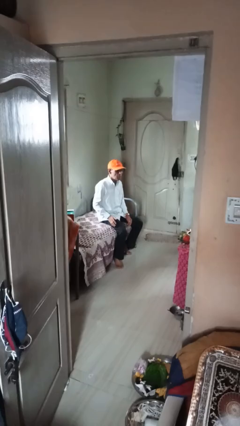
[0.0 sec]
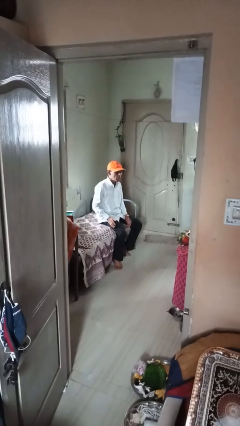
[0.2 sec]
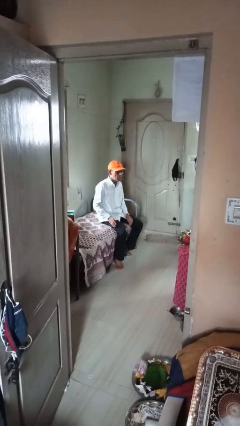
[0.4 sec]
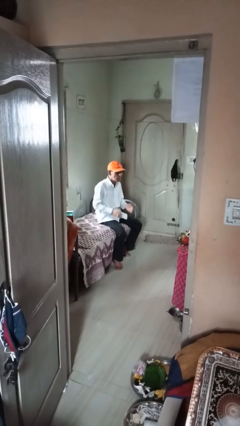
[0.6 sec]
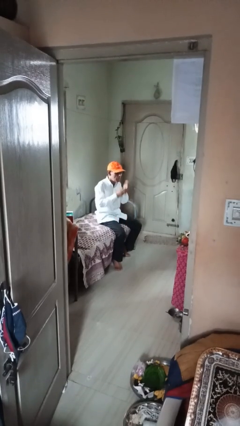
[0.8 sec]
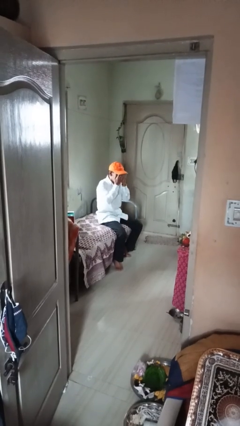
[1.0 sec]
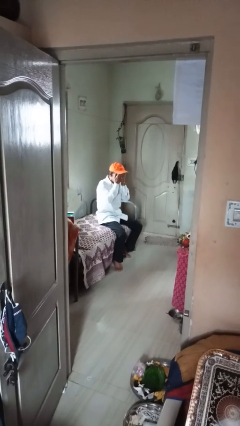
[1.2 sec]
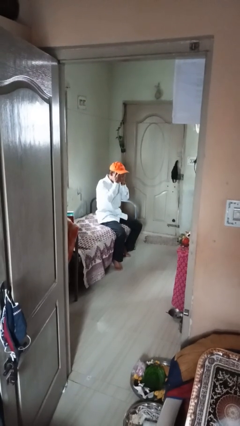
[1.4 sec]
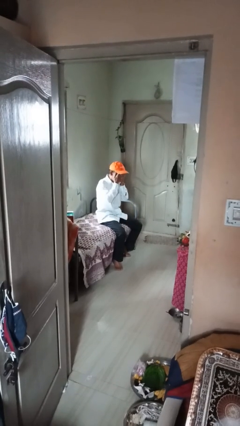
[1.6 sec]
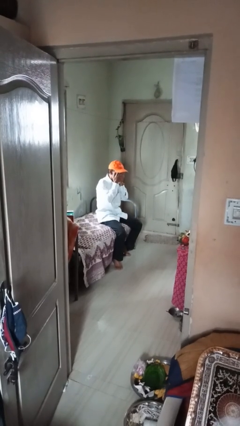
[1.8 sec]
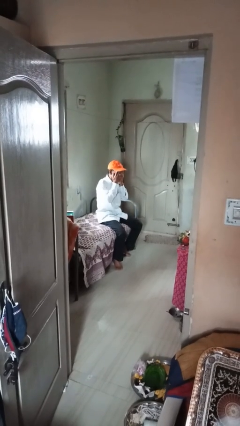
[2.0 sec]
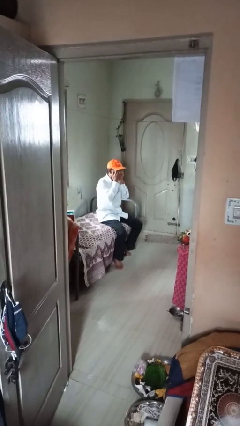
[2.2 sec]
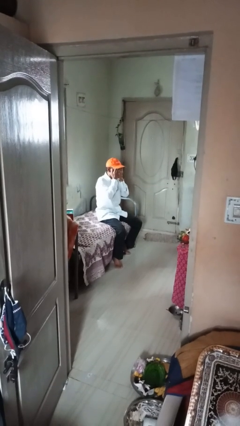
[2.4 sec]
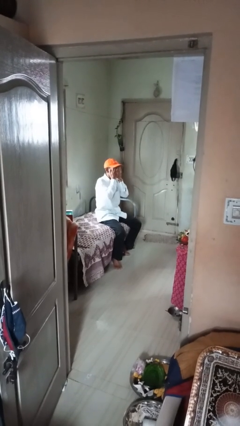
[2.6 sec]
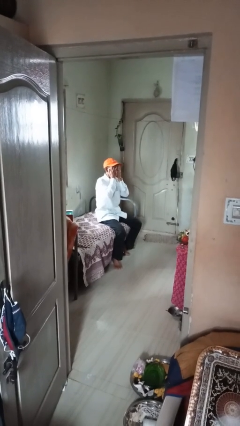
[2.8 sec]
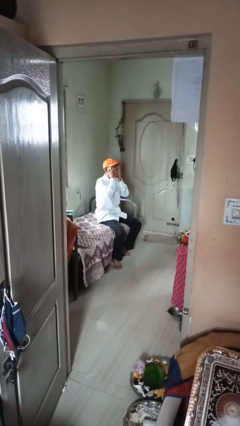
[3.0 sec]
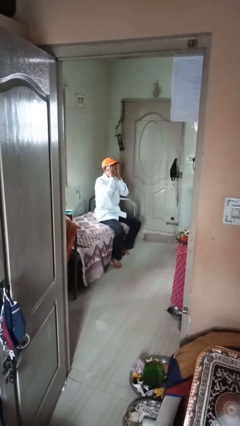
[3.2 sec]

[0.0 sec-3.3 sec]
person covers face with hands

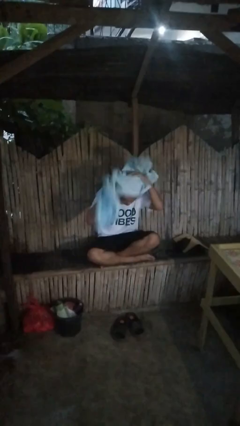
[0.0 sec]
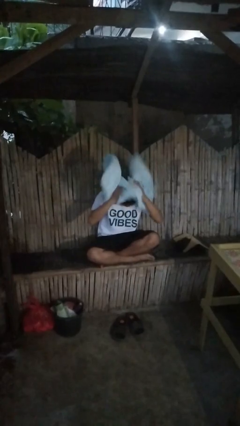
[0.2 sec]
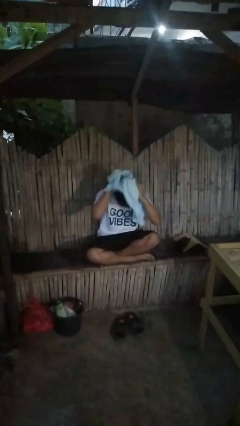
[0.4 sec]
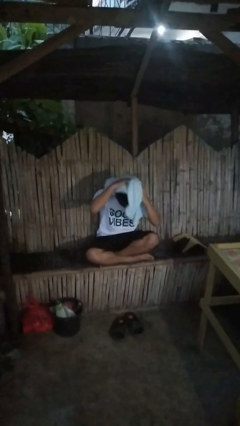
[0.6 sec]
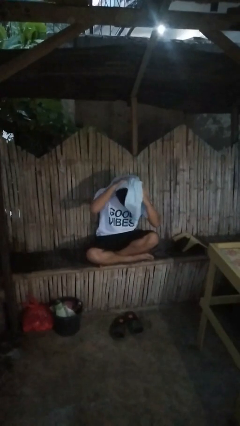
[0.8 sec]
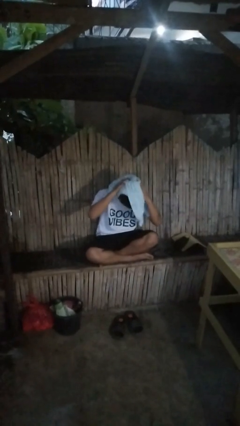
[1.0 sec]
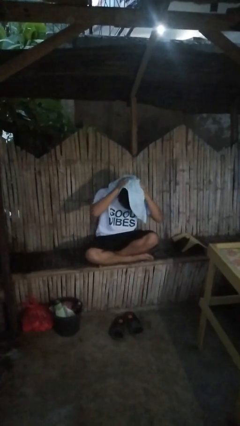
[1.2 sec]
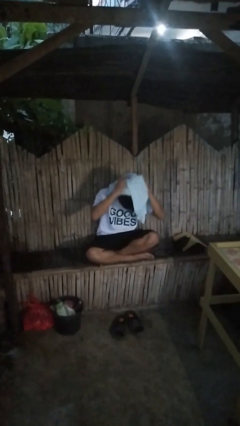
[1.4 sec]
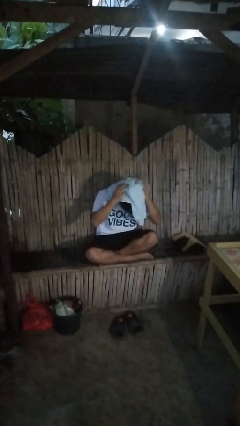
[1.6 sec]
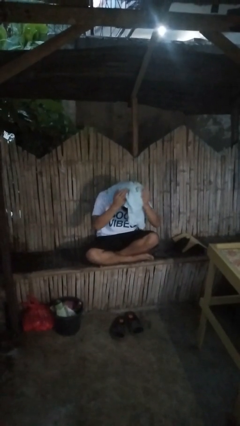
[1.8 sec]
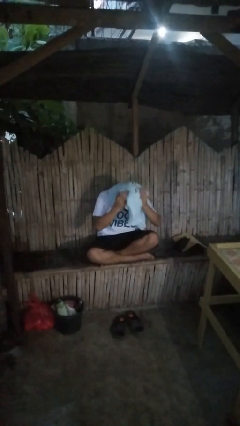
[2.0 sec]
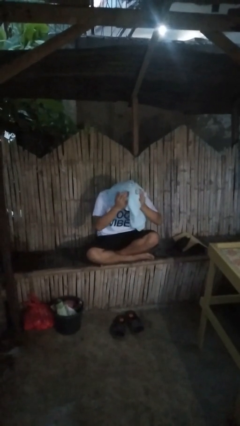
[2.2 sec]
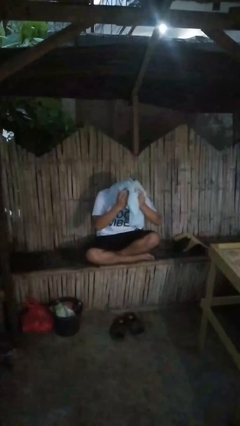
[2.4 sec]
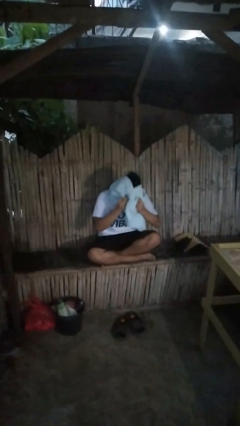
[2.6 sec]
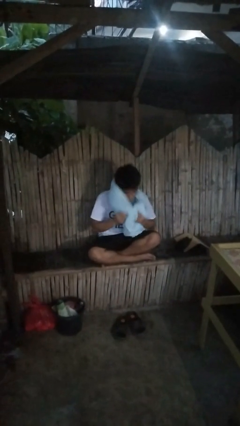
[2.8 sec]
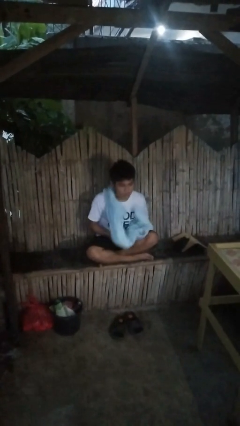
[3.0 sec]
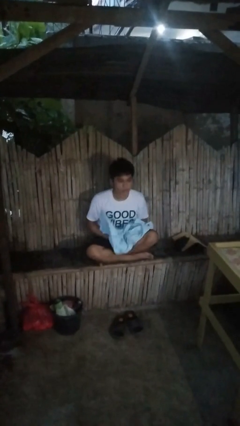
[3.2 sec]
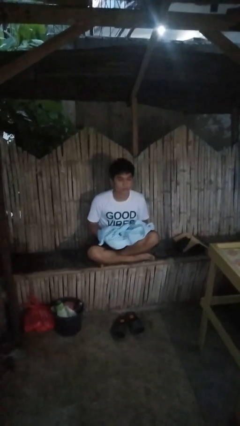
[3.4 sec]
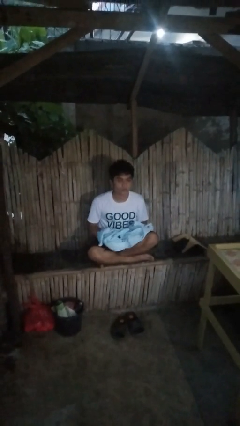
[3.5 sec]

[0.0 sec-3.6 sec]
person dries hair with towel

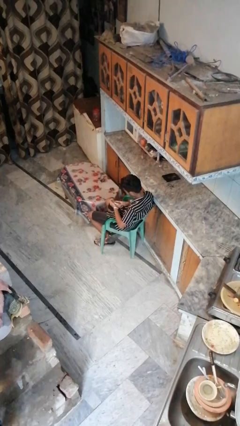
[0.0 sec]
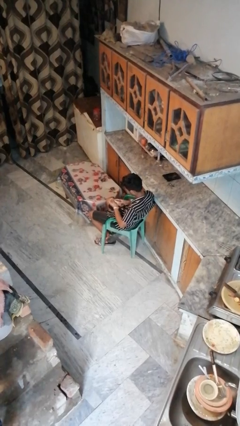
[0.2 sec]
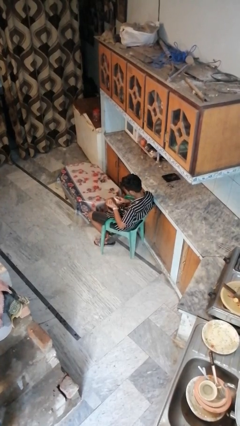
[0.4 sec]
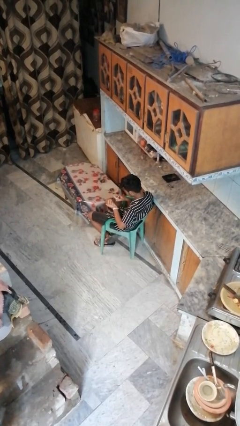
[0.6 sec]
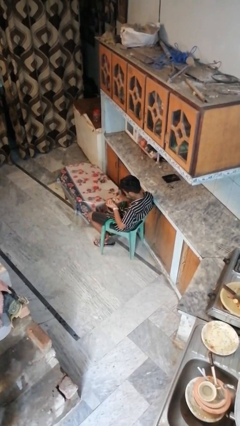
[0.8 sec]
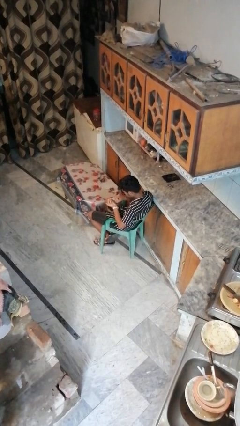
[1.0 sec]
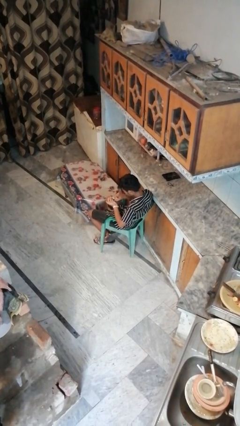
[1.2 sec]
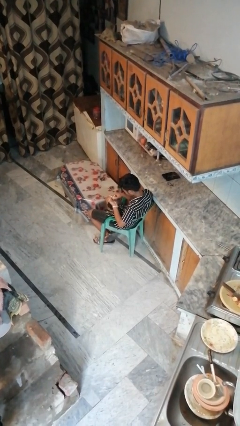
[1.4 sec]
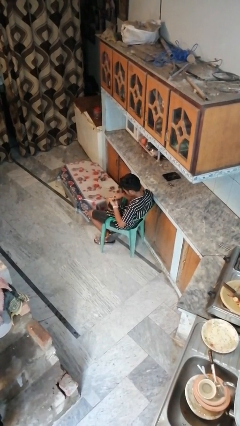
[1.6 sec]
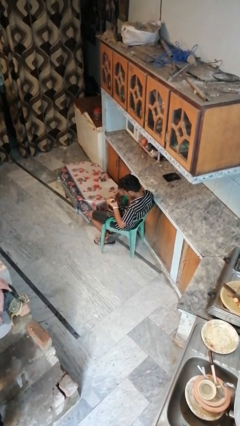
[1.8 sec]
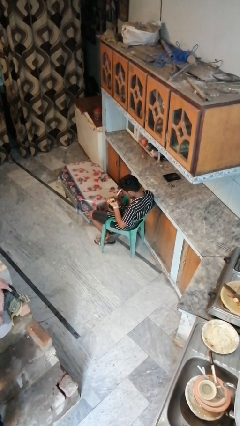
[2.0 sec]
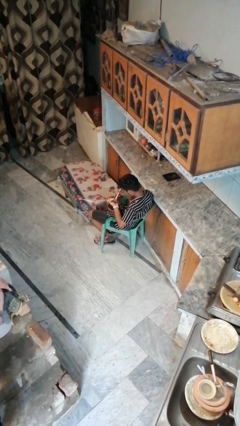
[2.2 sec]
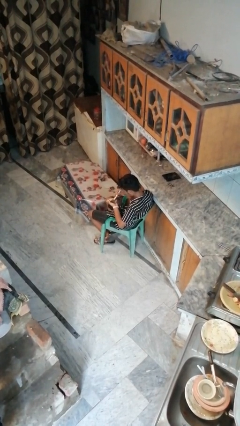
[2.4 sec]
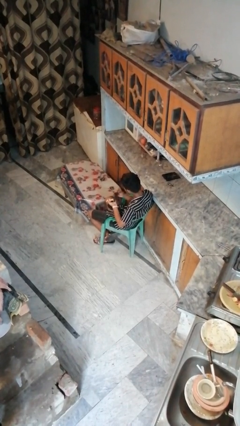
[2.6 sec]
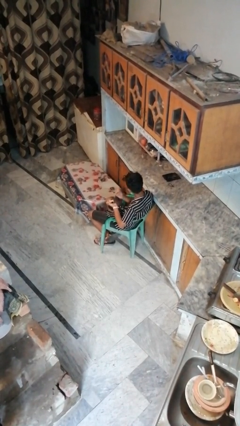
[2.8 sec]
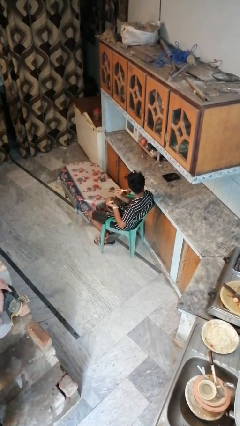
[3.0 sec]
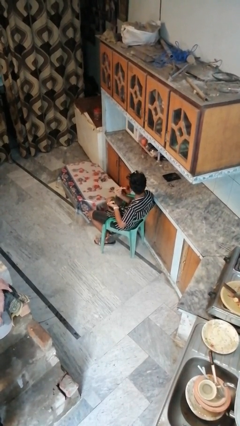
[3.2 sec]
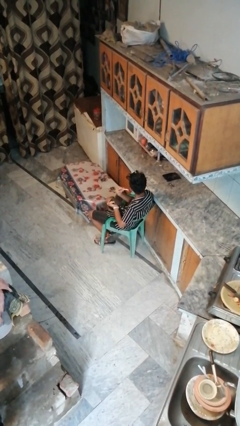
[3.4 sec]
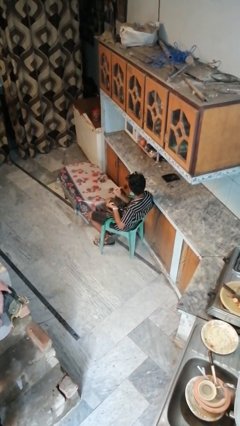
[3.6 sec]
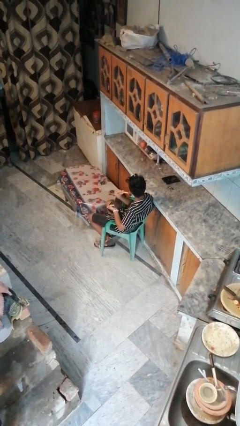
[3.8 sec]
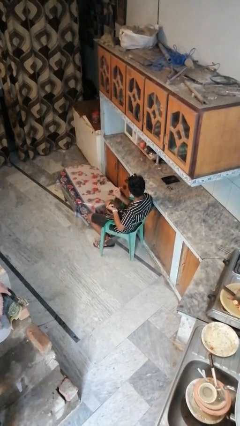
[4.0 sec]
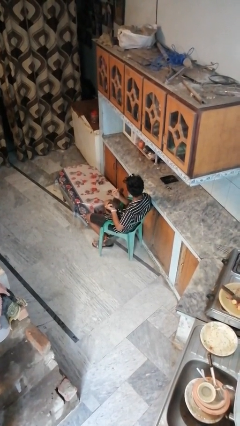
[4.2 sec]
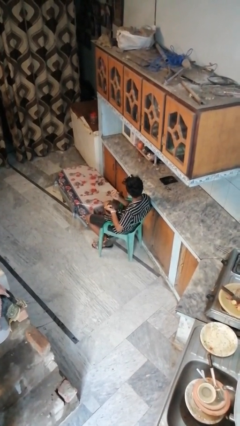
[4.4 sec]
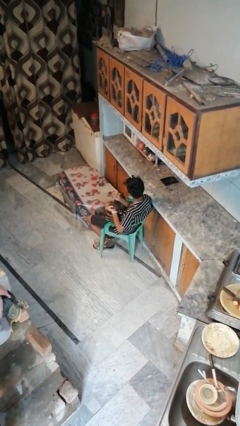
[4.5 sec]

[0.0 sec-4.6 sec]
person applies foundation makeup

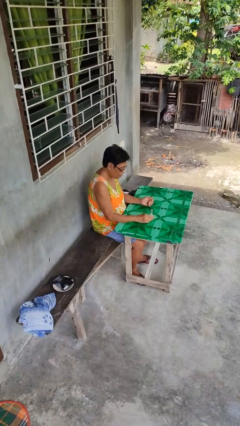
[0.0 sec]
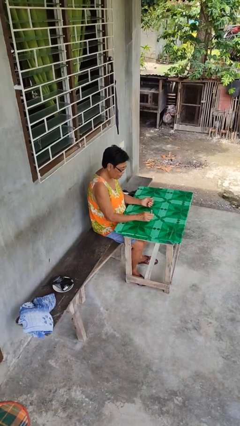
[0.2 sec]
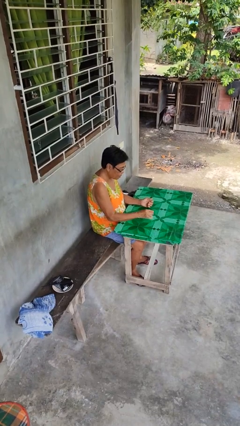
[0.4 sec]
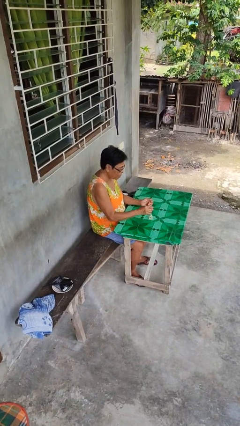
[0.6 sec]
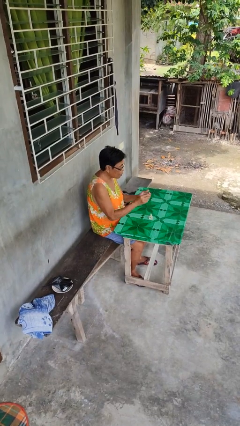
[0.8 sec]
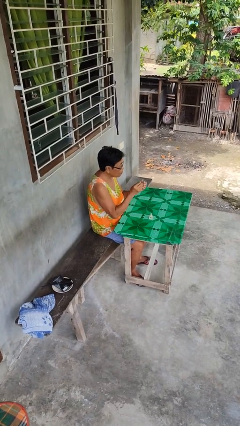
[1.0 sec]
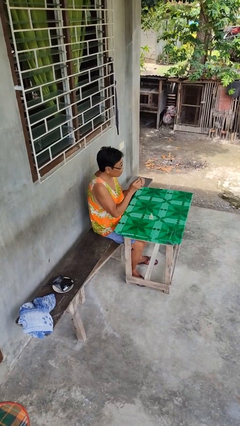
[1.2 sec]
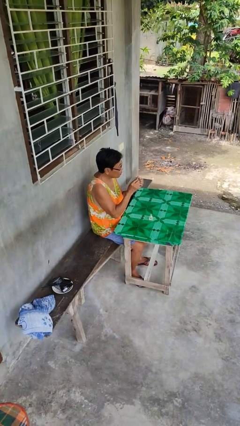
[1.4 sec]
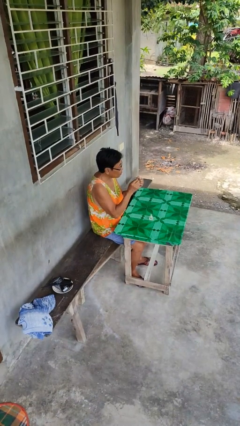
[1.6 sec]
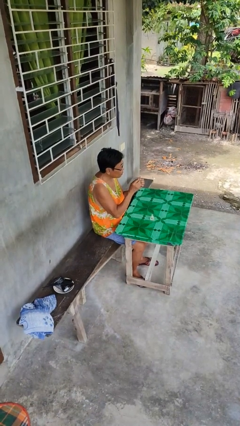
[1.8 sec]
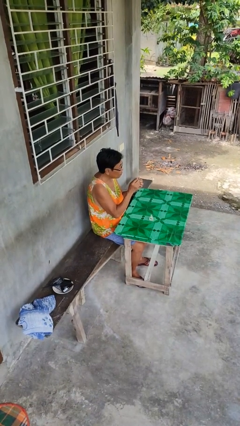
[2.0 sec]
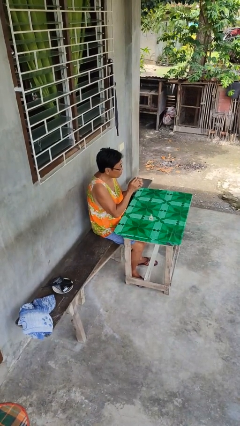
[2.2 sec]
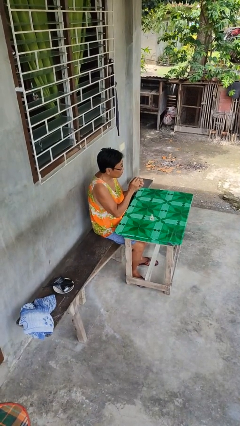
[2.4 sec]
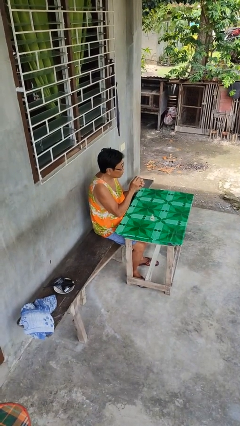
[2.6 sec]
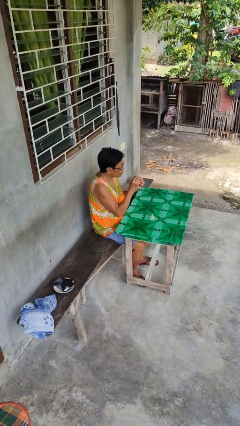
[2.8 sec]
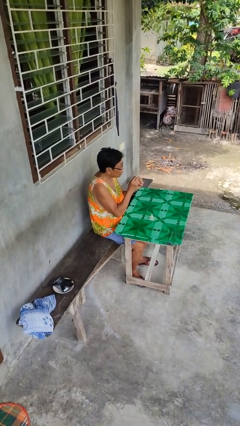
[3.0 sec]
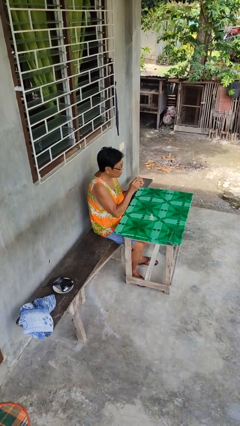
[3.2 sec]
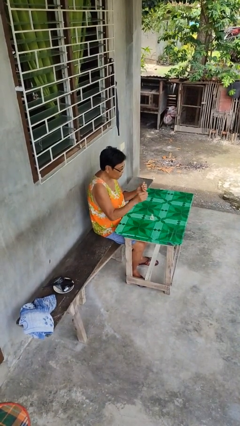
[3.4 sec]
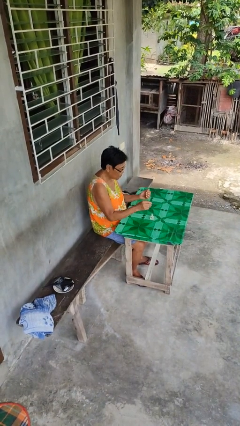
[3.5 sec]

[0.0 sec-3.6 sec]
person paints fingernails

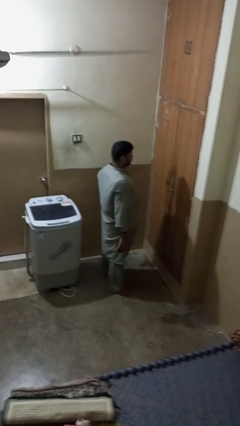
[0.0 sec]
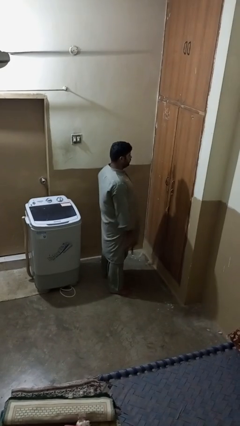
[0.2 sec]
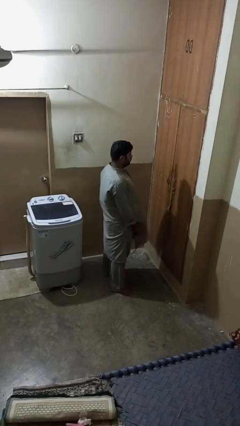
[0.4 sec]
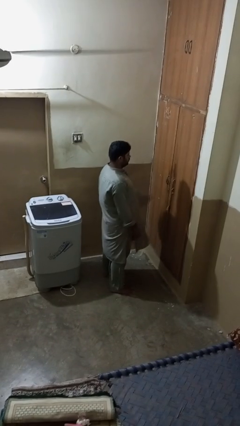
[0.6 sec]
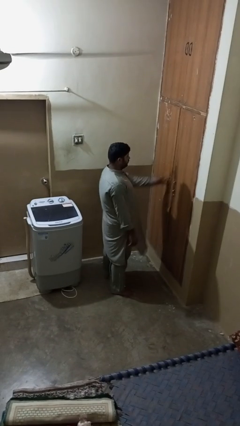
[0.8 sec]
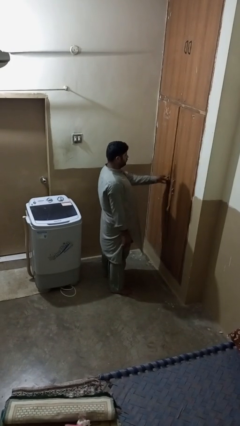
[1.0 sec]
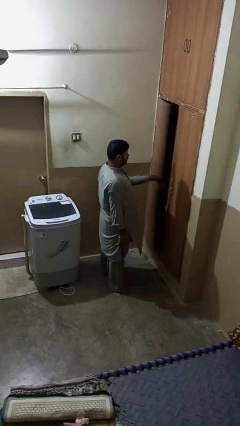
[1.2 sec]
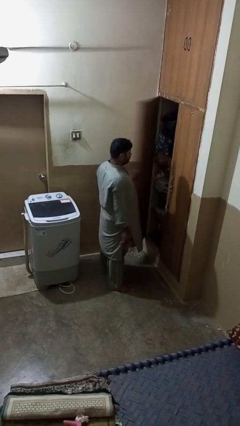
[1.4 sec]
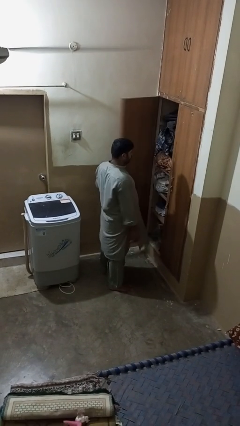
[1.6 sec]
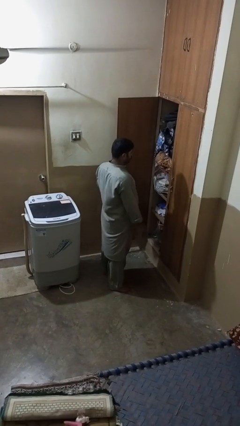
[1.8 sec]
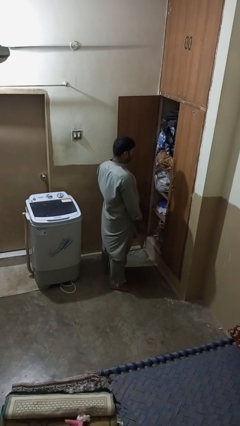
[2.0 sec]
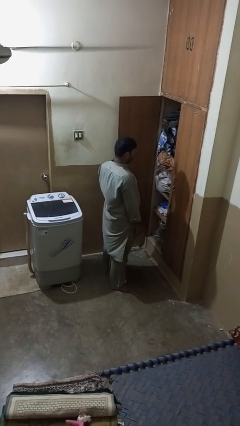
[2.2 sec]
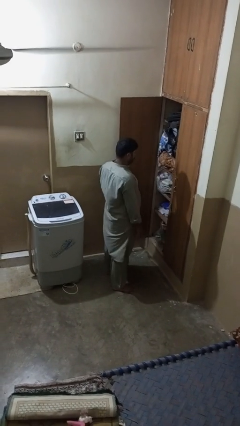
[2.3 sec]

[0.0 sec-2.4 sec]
person opens closet door

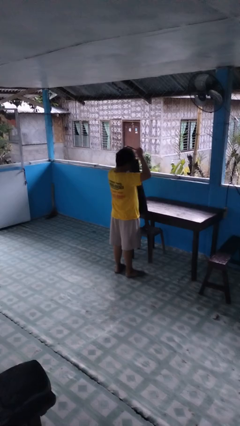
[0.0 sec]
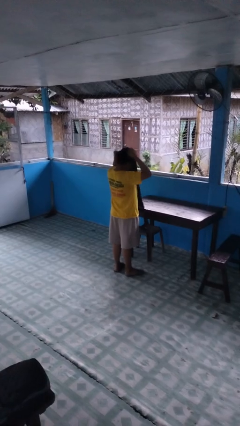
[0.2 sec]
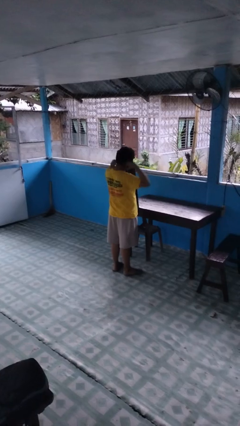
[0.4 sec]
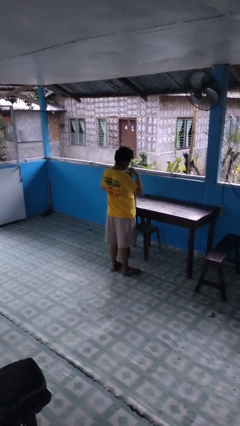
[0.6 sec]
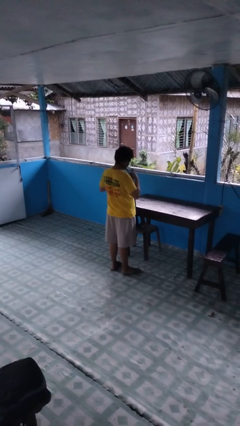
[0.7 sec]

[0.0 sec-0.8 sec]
person puts on apron
